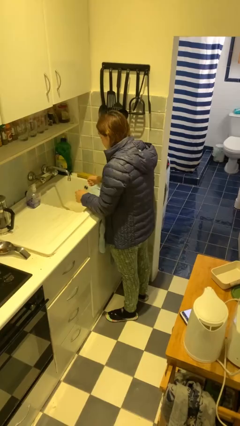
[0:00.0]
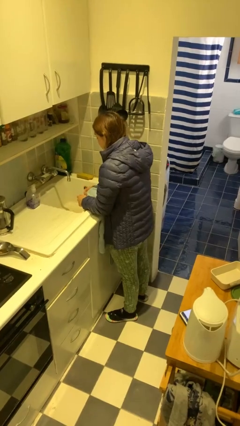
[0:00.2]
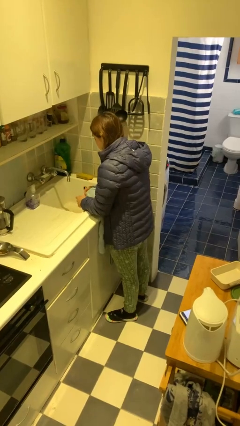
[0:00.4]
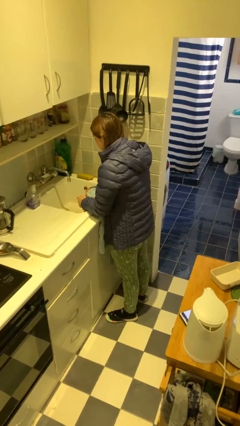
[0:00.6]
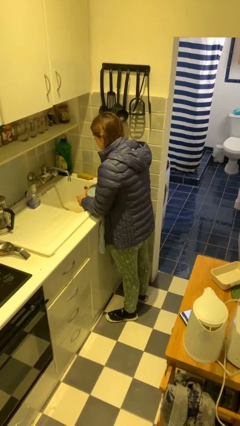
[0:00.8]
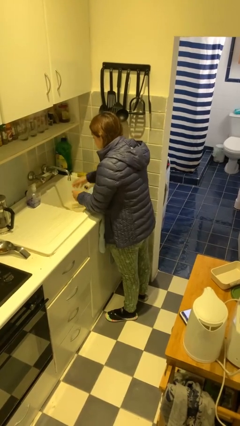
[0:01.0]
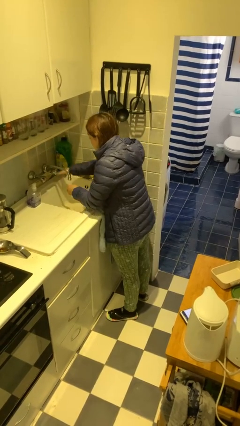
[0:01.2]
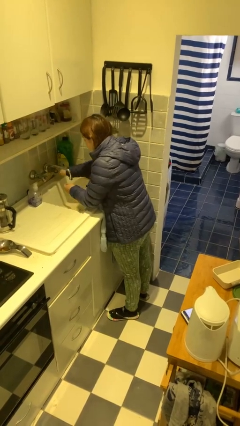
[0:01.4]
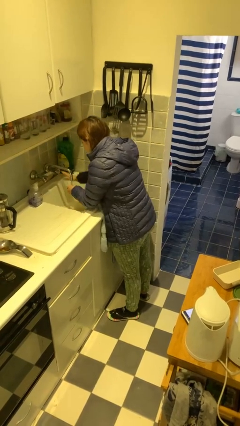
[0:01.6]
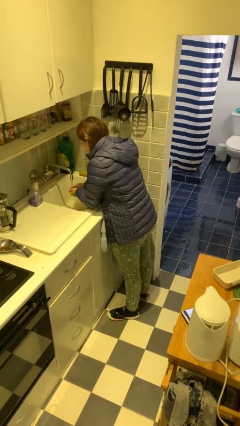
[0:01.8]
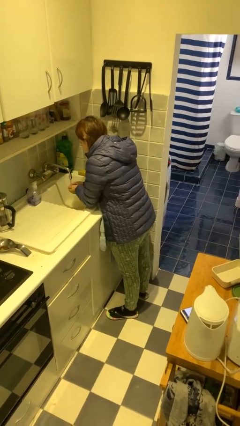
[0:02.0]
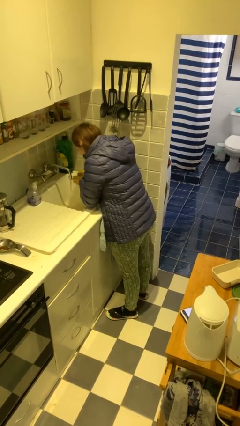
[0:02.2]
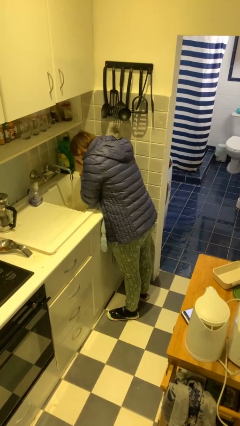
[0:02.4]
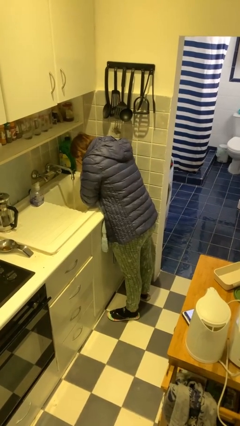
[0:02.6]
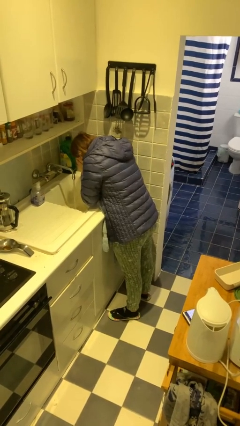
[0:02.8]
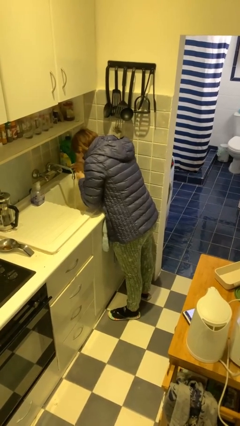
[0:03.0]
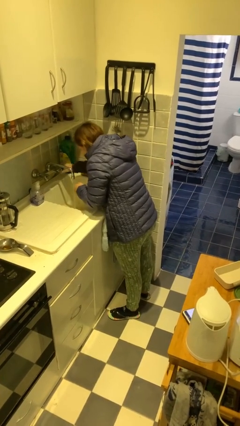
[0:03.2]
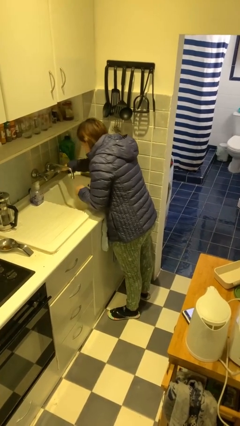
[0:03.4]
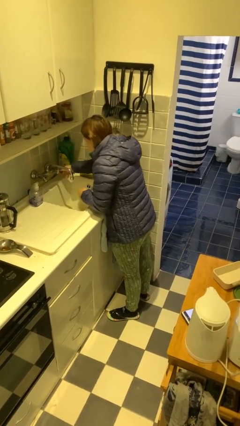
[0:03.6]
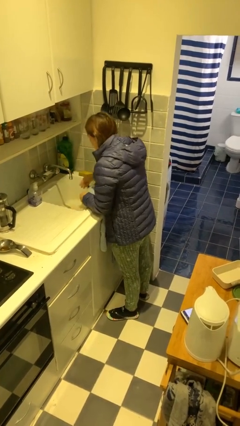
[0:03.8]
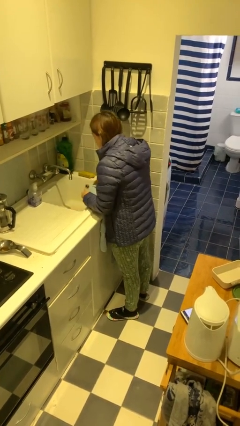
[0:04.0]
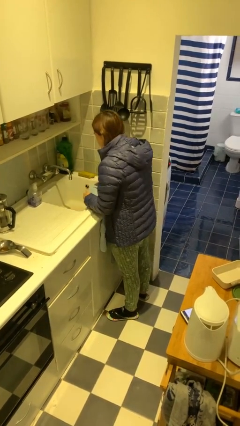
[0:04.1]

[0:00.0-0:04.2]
person washes face

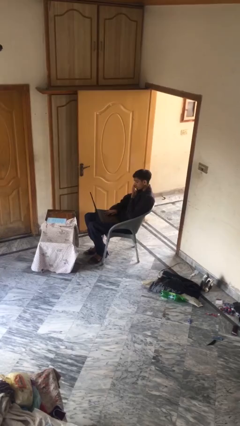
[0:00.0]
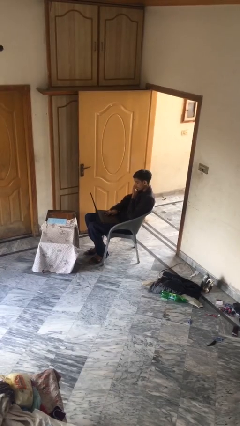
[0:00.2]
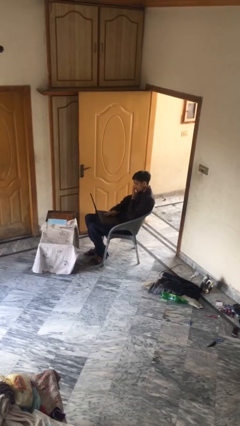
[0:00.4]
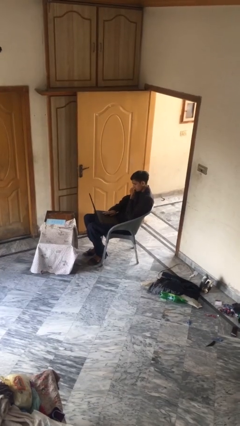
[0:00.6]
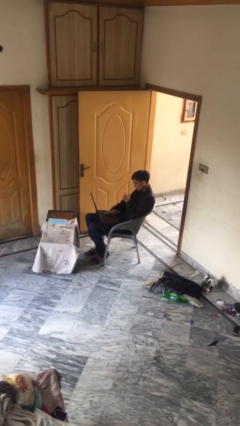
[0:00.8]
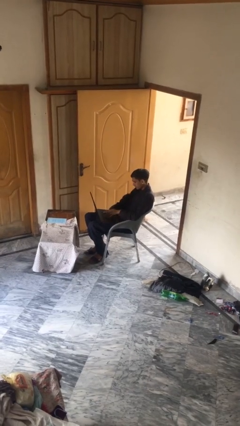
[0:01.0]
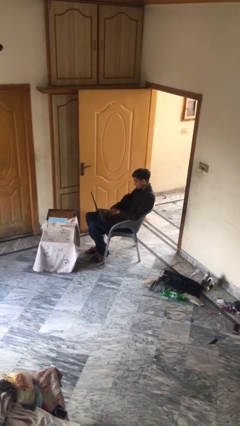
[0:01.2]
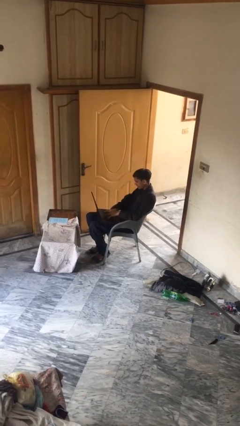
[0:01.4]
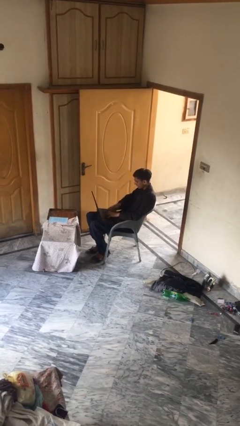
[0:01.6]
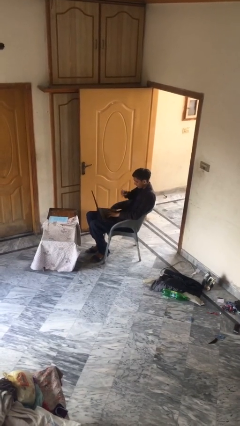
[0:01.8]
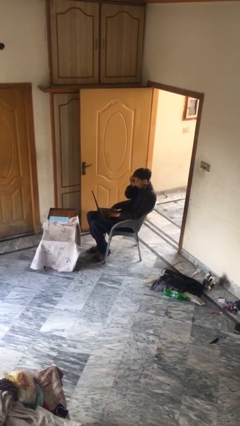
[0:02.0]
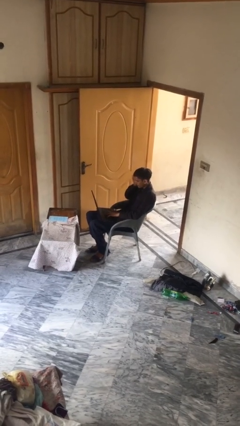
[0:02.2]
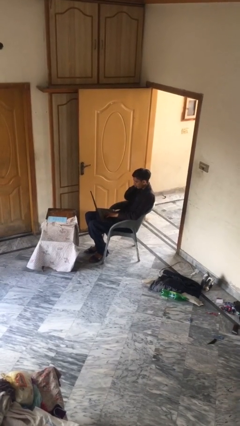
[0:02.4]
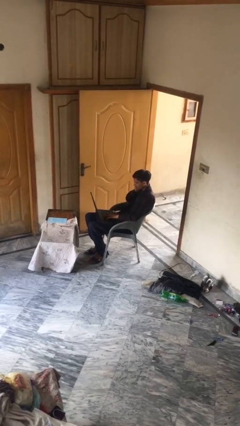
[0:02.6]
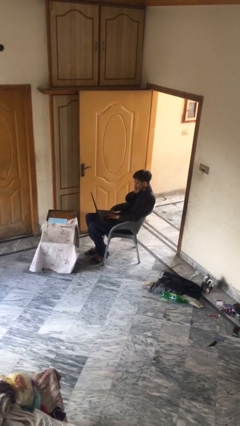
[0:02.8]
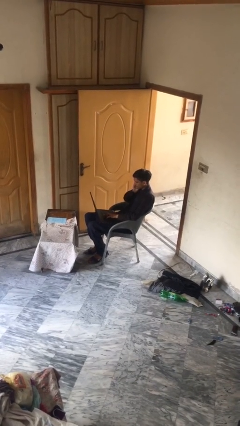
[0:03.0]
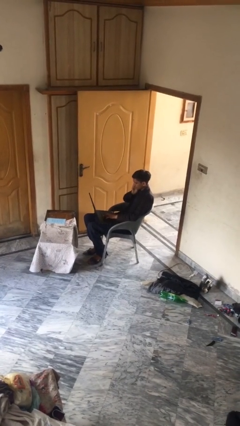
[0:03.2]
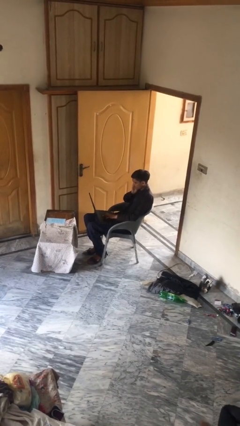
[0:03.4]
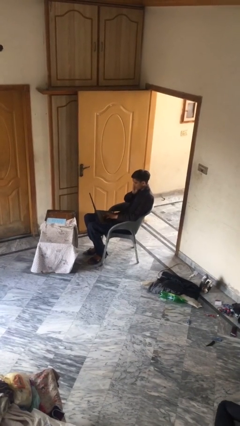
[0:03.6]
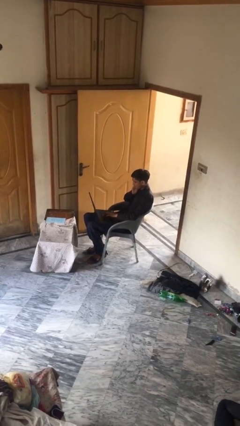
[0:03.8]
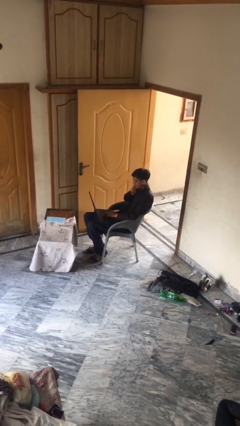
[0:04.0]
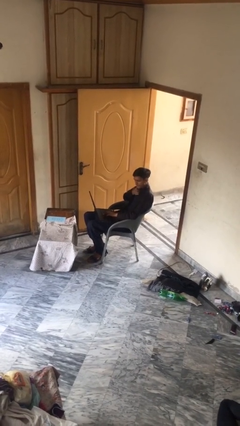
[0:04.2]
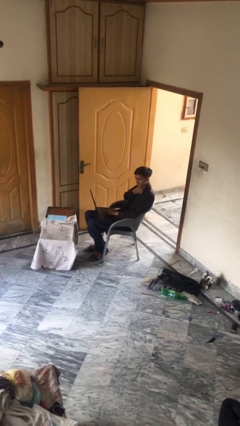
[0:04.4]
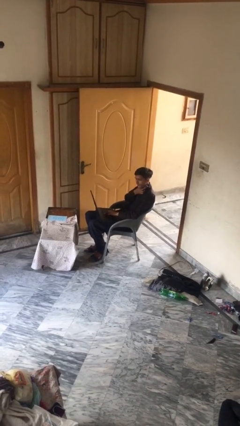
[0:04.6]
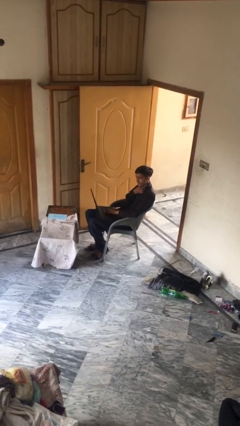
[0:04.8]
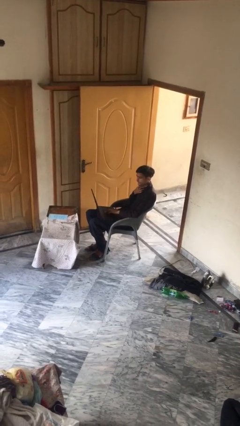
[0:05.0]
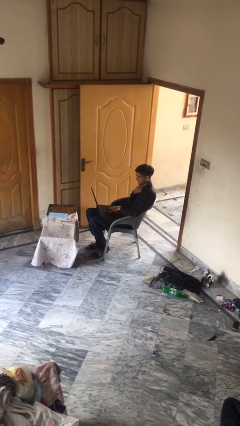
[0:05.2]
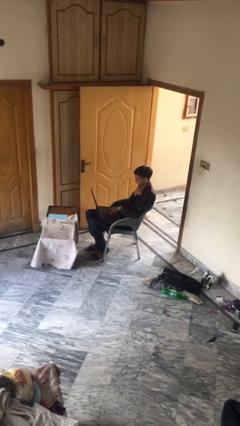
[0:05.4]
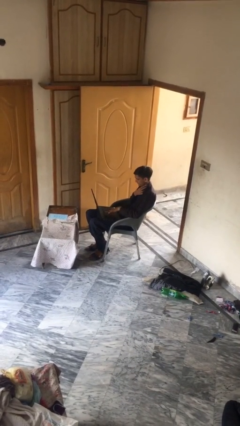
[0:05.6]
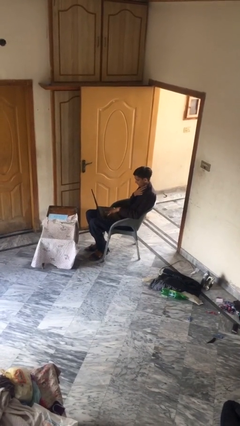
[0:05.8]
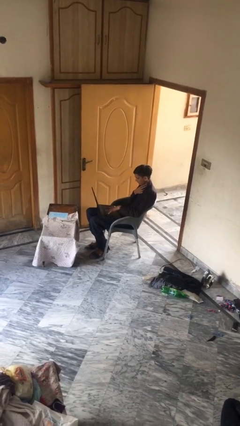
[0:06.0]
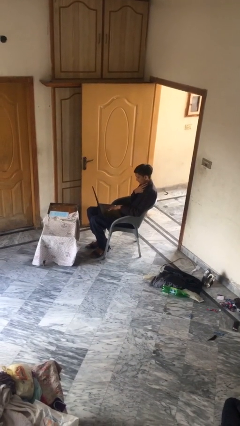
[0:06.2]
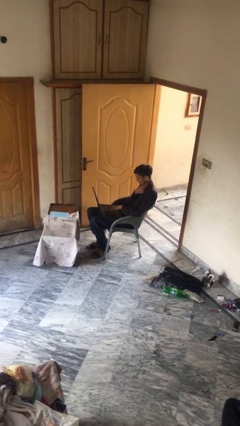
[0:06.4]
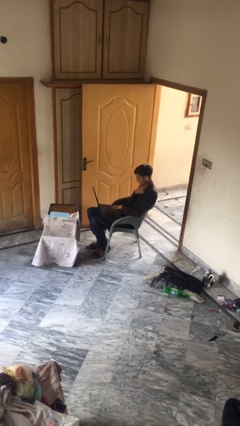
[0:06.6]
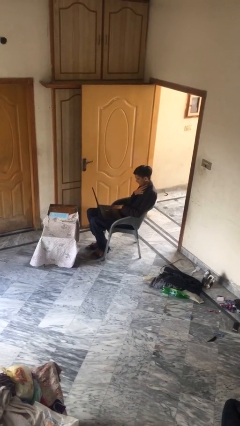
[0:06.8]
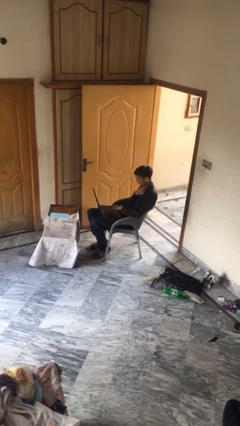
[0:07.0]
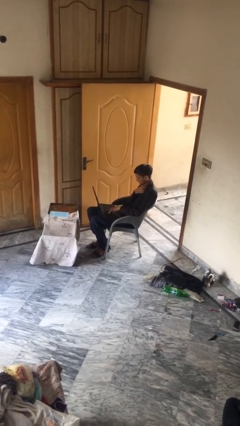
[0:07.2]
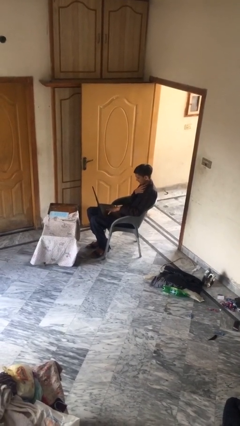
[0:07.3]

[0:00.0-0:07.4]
person interacts with laptop

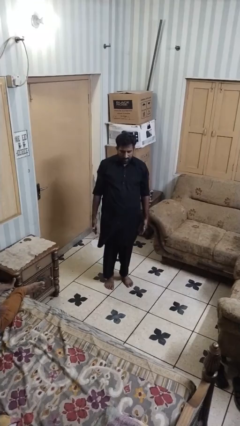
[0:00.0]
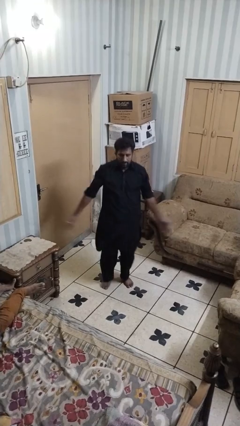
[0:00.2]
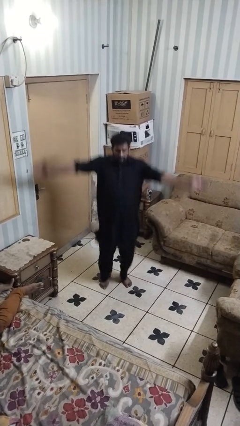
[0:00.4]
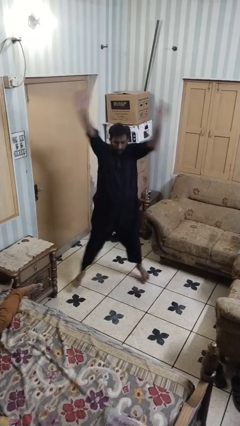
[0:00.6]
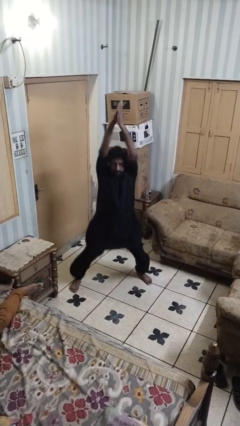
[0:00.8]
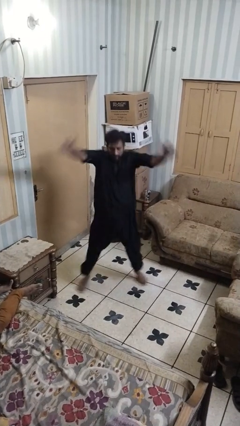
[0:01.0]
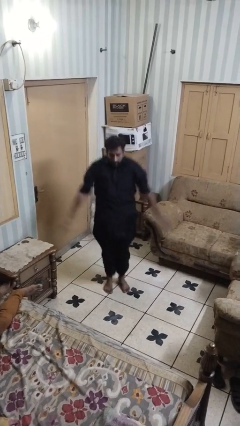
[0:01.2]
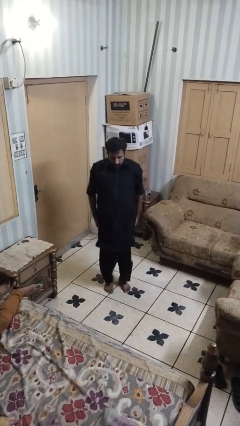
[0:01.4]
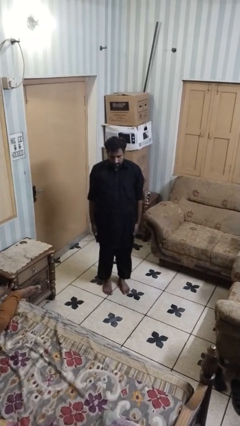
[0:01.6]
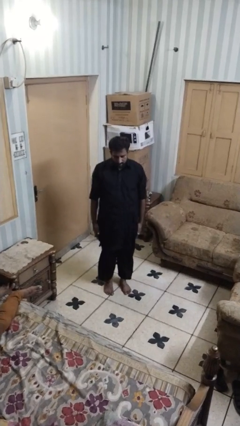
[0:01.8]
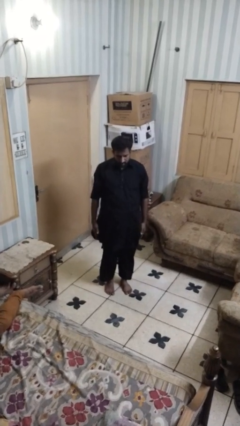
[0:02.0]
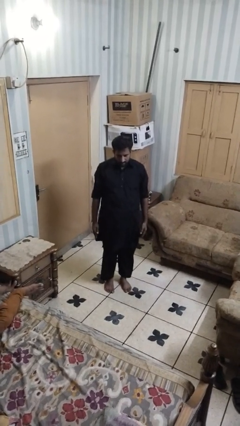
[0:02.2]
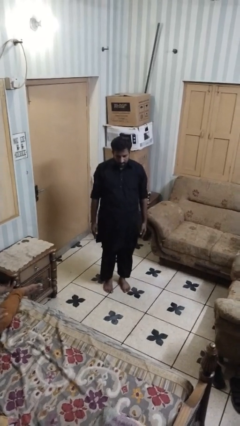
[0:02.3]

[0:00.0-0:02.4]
person exercises with jumping jacks

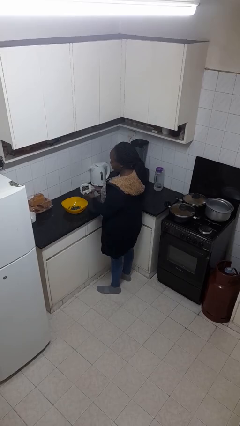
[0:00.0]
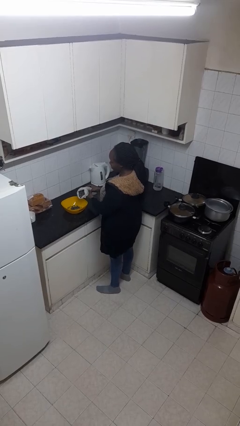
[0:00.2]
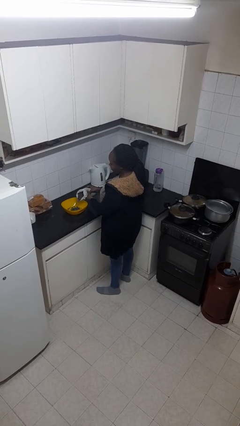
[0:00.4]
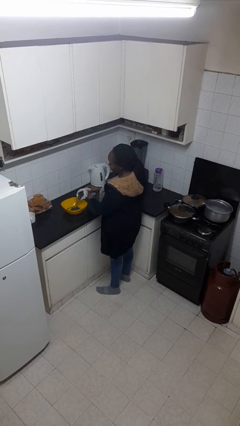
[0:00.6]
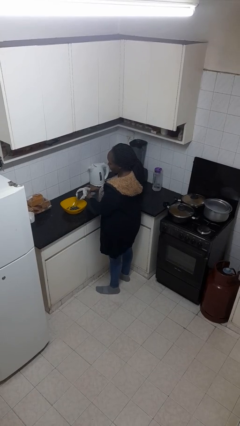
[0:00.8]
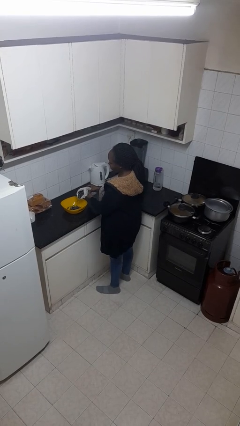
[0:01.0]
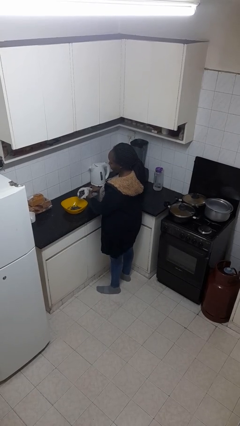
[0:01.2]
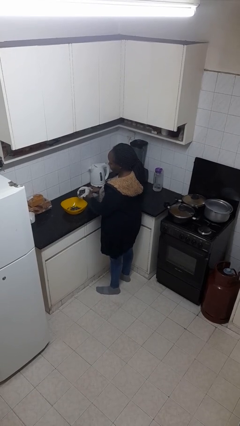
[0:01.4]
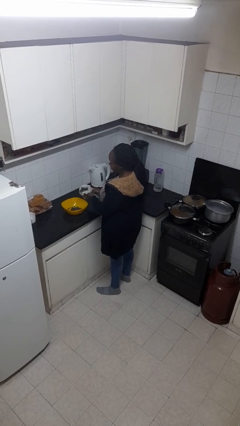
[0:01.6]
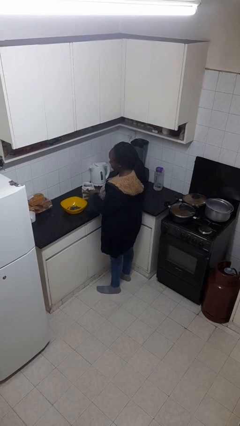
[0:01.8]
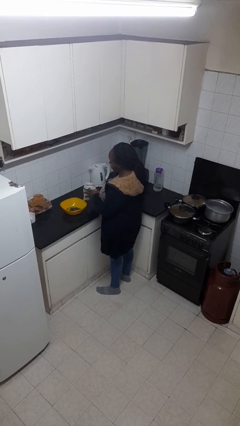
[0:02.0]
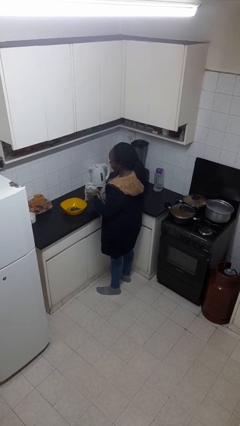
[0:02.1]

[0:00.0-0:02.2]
person pours into bowl

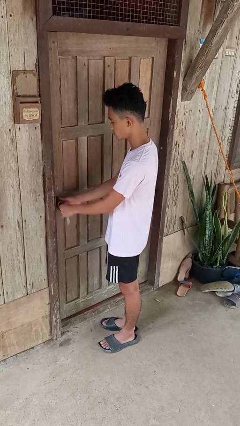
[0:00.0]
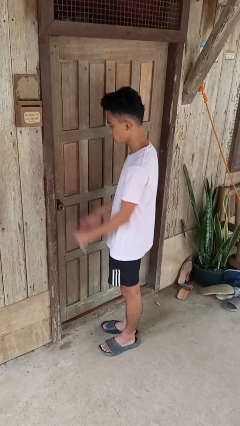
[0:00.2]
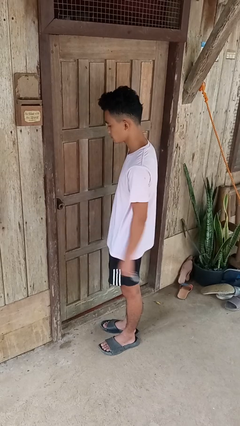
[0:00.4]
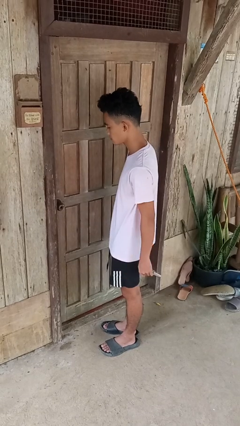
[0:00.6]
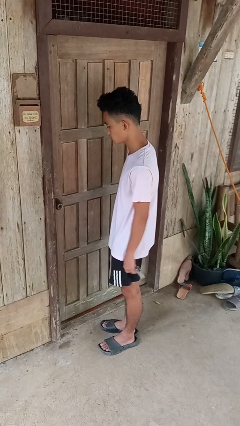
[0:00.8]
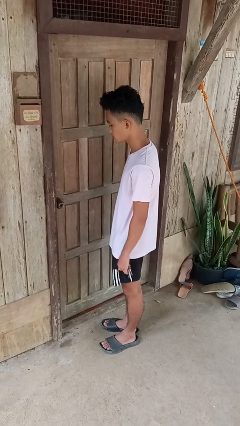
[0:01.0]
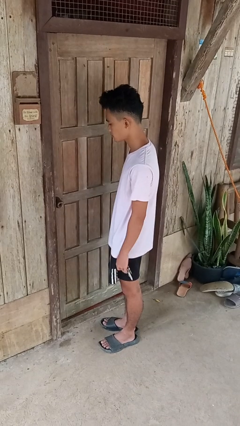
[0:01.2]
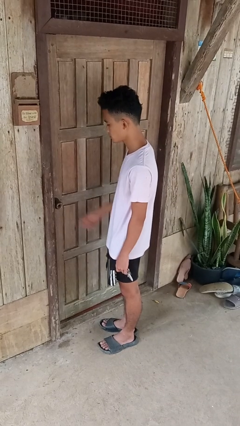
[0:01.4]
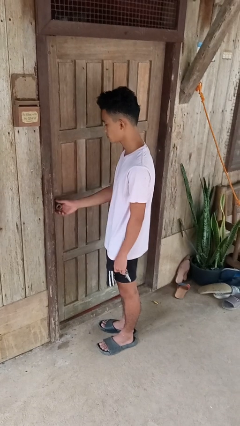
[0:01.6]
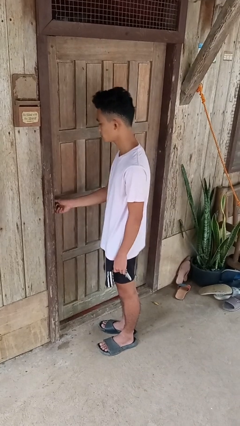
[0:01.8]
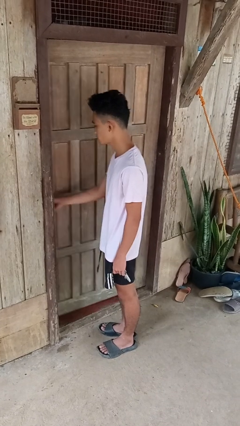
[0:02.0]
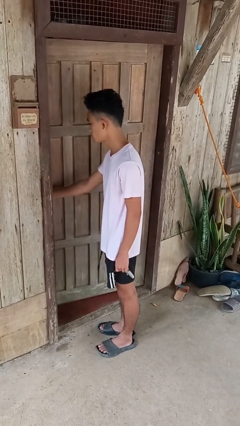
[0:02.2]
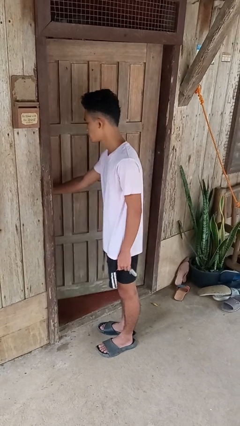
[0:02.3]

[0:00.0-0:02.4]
person unlocks door with keys
